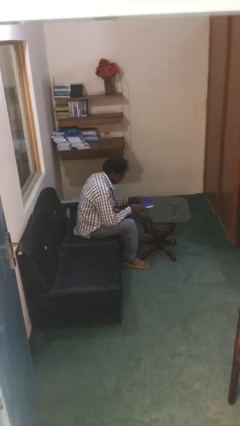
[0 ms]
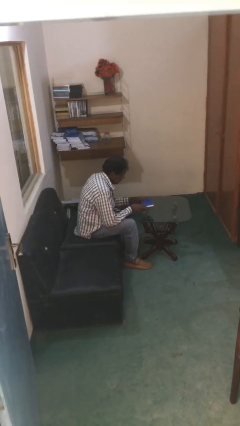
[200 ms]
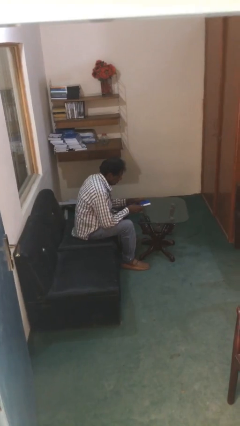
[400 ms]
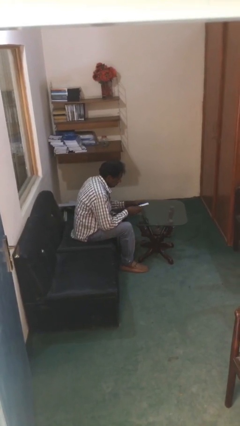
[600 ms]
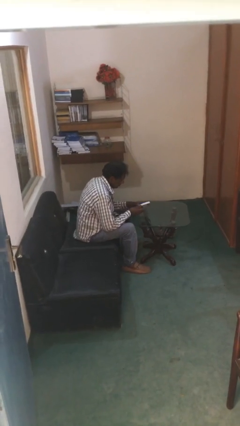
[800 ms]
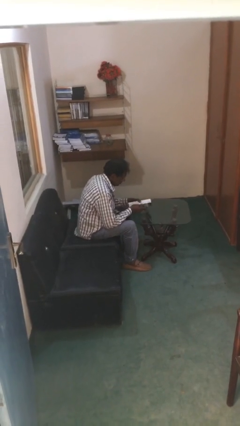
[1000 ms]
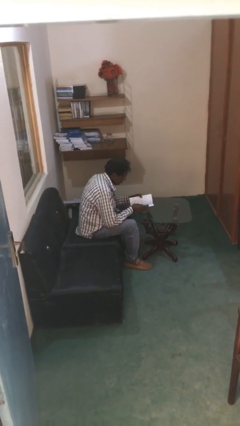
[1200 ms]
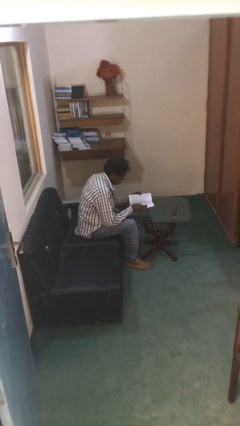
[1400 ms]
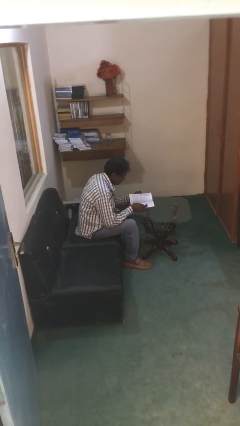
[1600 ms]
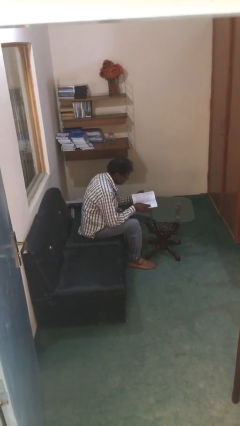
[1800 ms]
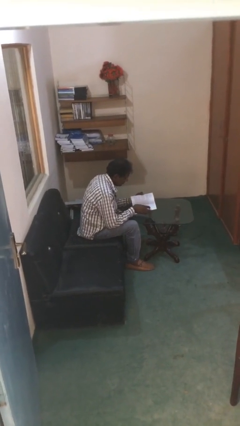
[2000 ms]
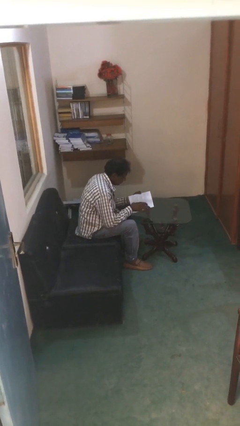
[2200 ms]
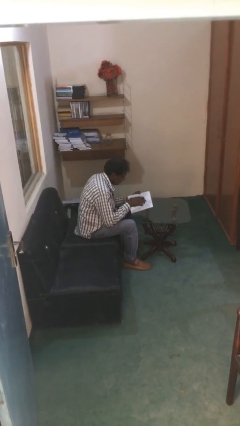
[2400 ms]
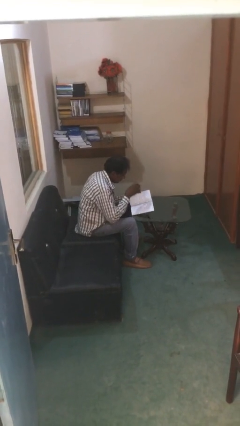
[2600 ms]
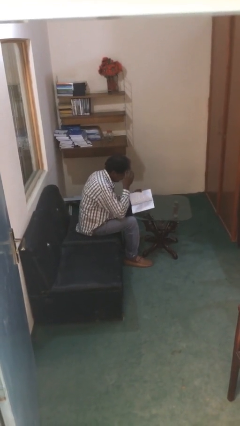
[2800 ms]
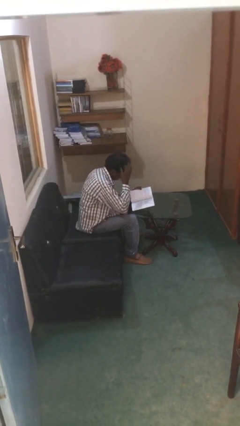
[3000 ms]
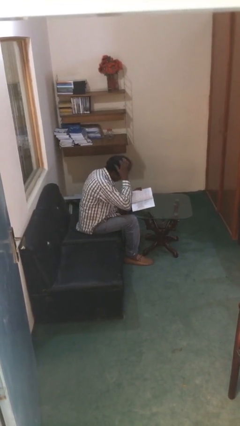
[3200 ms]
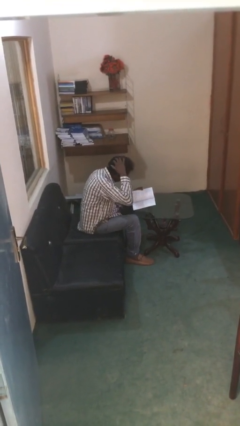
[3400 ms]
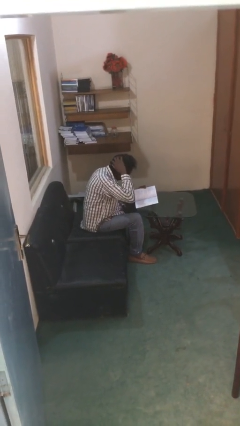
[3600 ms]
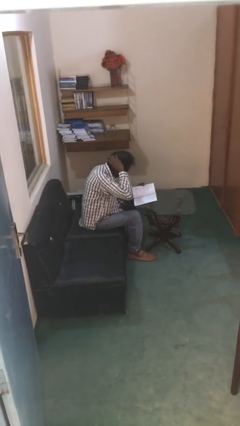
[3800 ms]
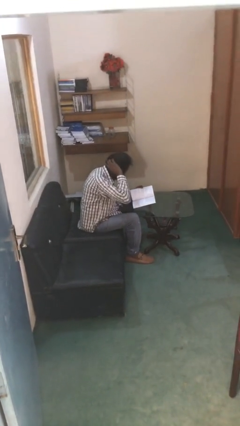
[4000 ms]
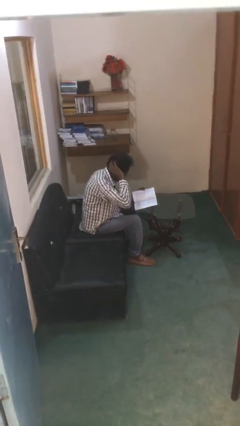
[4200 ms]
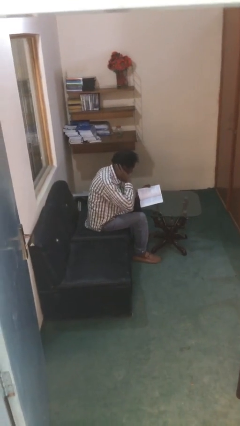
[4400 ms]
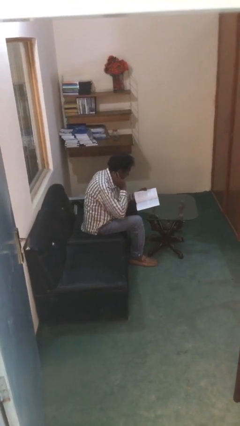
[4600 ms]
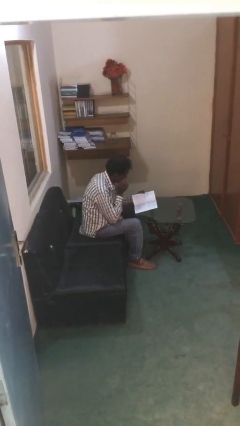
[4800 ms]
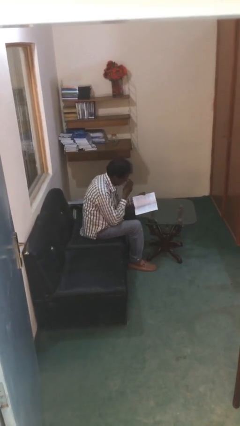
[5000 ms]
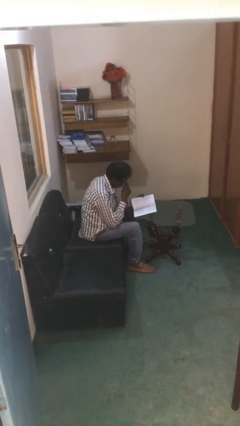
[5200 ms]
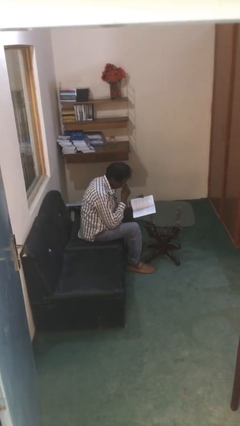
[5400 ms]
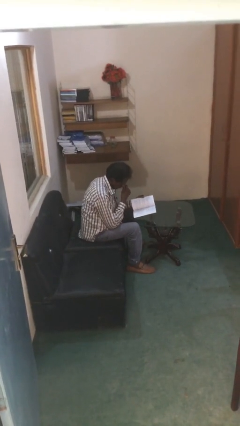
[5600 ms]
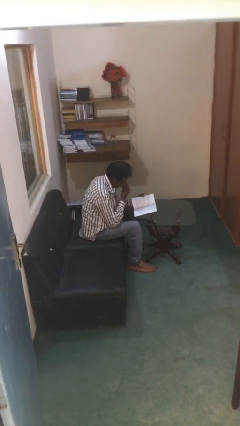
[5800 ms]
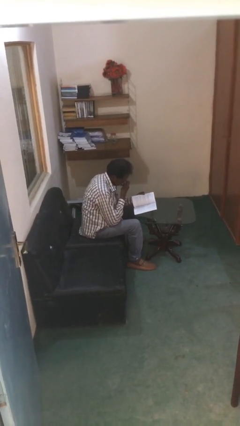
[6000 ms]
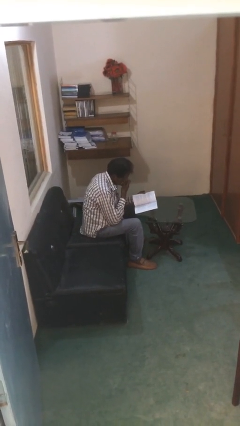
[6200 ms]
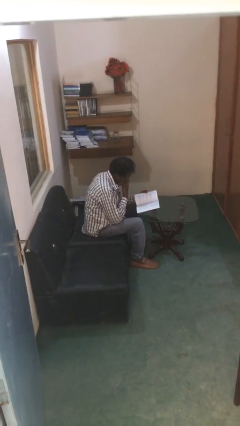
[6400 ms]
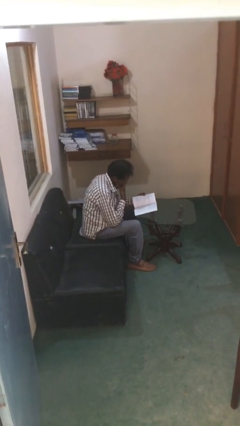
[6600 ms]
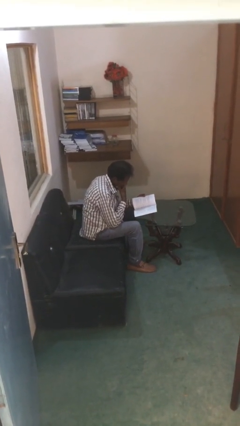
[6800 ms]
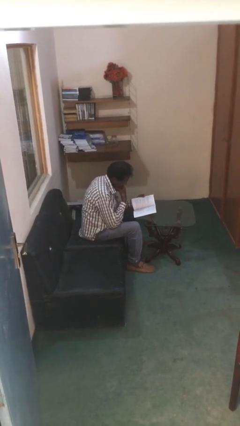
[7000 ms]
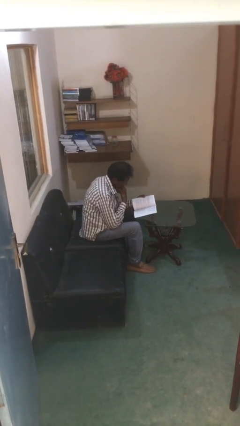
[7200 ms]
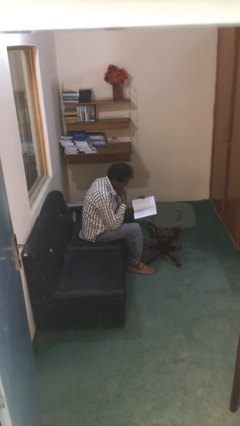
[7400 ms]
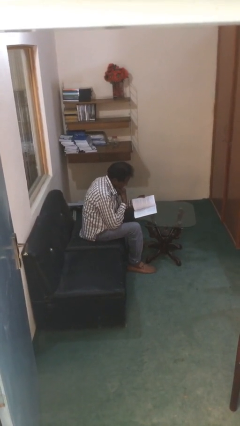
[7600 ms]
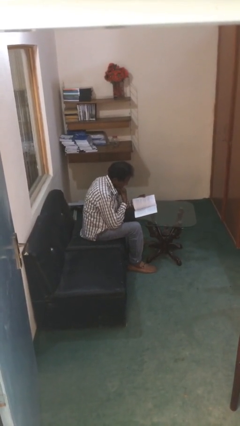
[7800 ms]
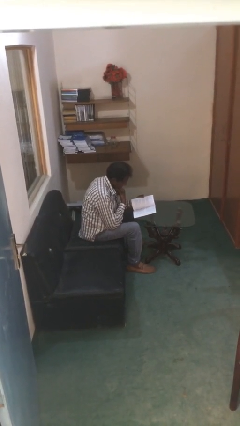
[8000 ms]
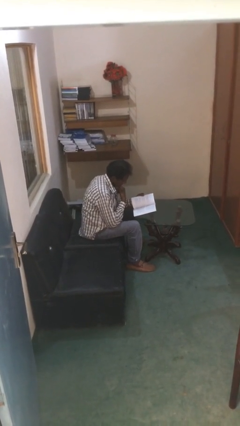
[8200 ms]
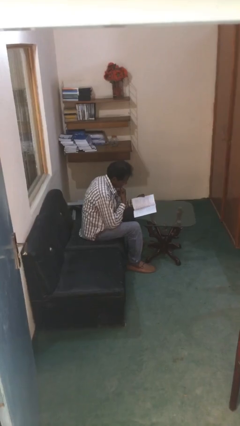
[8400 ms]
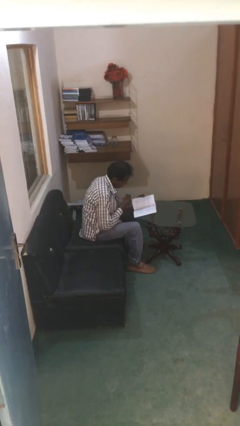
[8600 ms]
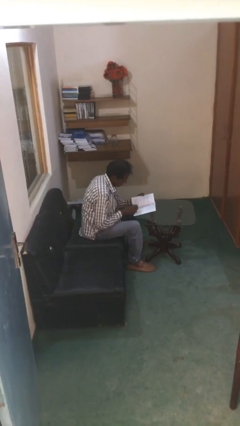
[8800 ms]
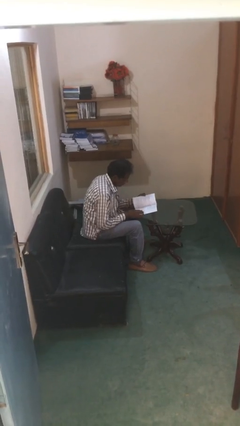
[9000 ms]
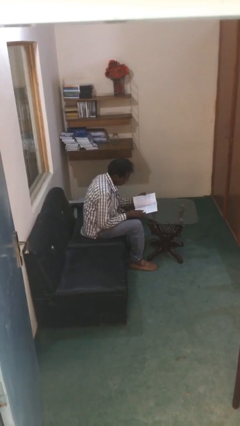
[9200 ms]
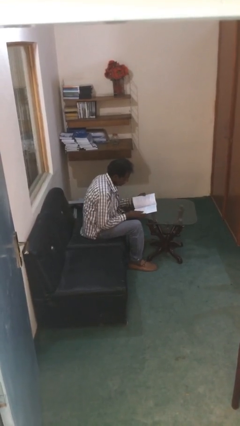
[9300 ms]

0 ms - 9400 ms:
person reads document

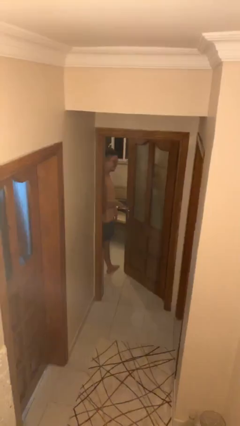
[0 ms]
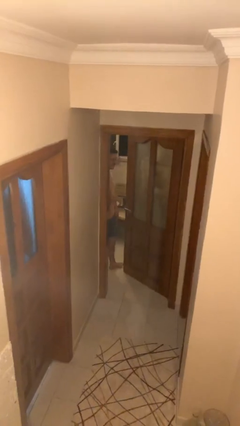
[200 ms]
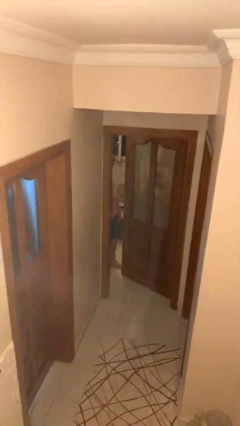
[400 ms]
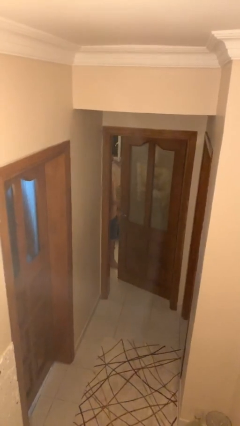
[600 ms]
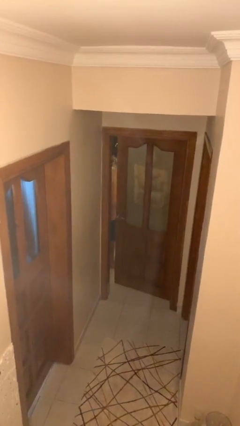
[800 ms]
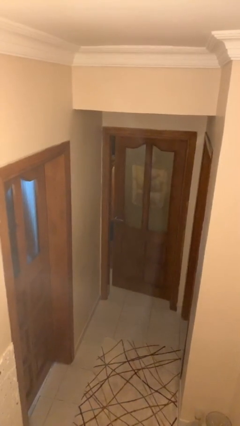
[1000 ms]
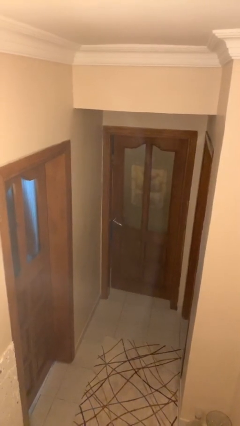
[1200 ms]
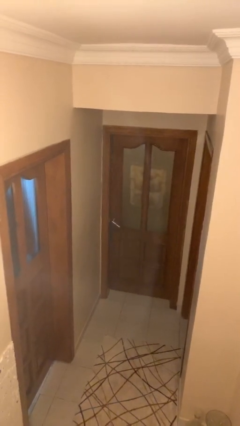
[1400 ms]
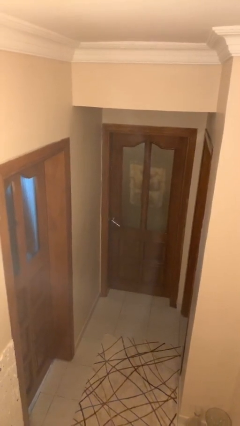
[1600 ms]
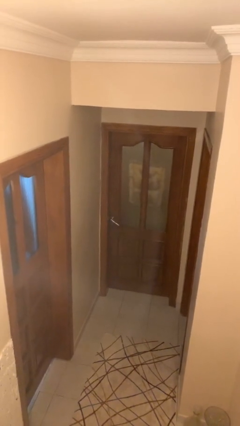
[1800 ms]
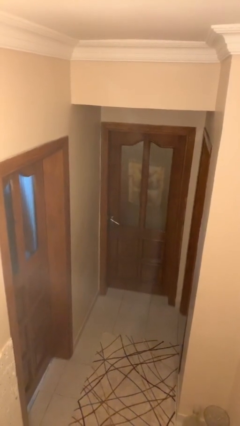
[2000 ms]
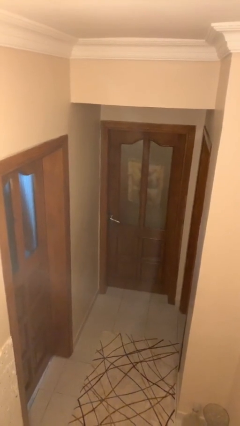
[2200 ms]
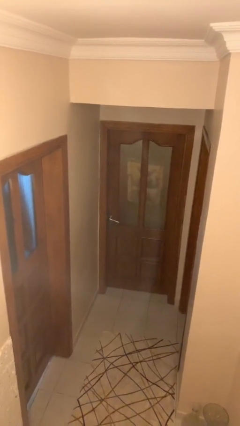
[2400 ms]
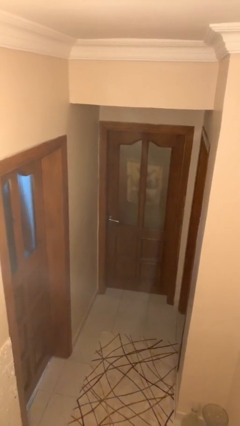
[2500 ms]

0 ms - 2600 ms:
person closes facility door

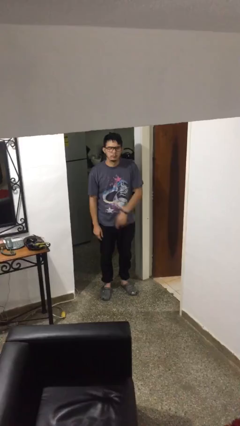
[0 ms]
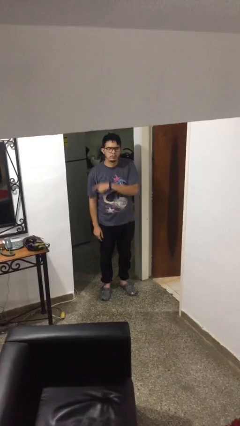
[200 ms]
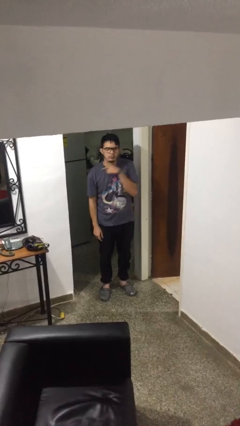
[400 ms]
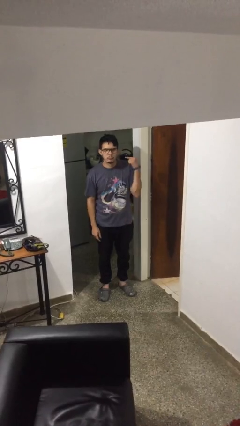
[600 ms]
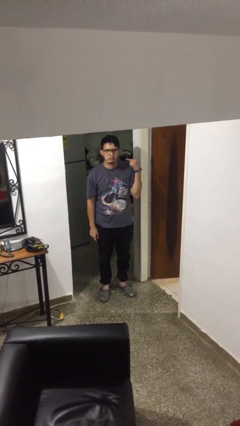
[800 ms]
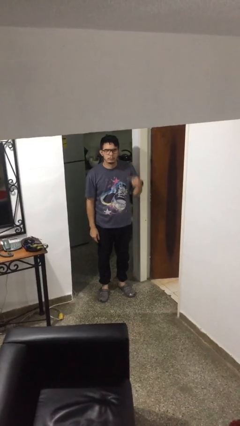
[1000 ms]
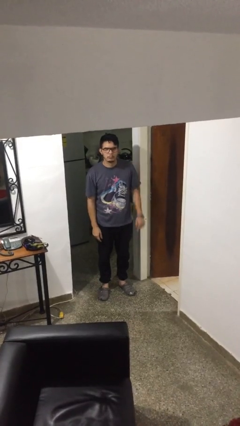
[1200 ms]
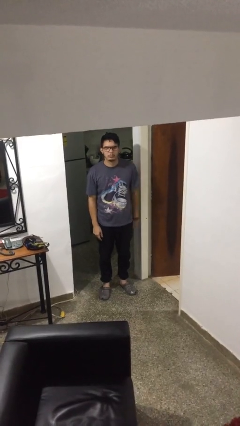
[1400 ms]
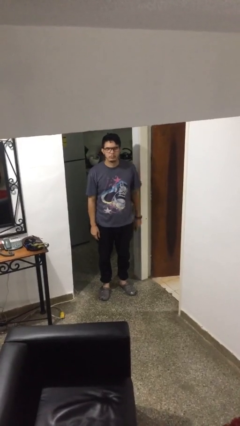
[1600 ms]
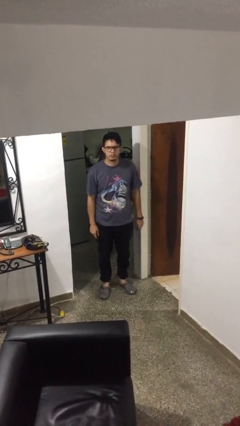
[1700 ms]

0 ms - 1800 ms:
person gestures cut

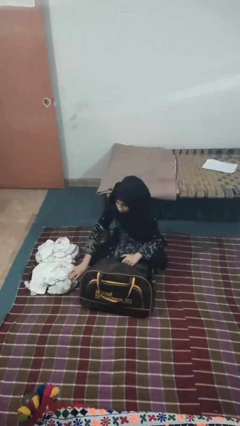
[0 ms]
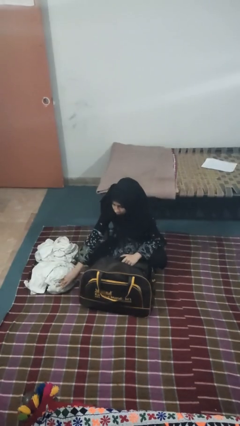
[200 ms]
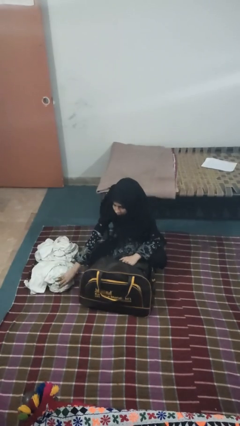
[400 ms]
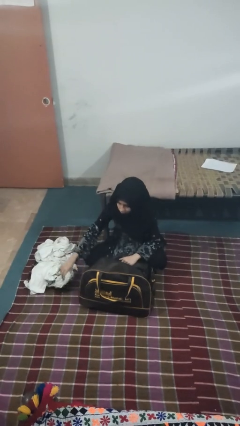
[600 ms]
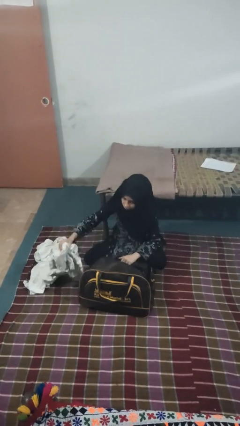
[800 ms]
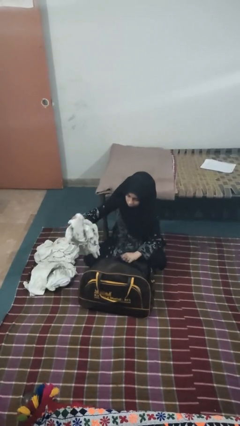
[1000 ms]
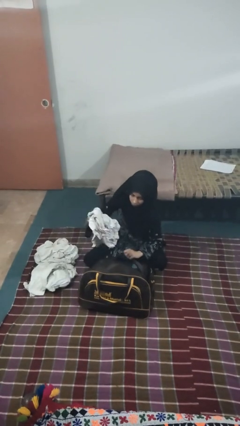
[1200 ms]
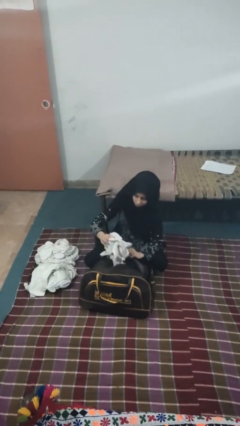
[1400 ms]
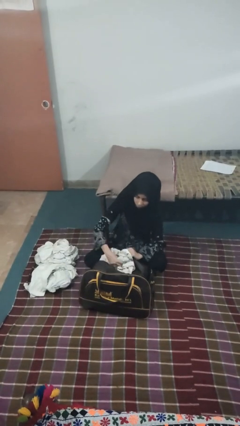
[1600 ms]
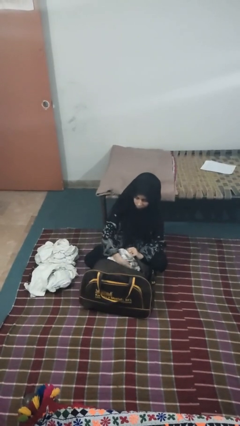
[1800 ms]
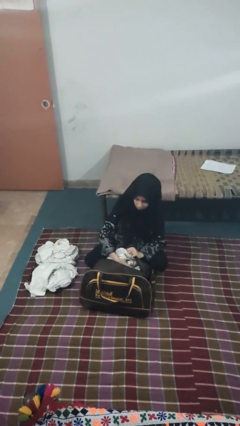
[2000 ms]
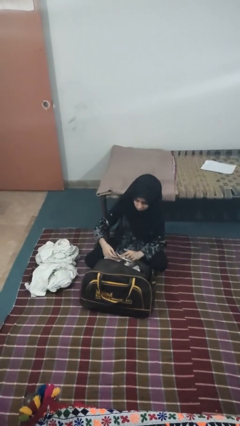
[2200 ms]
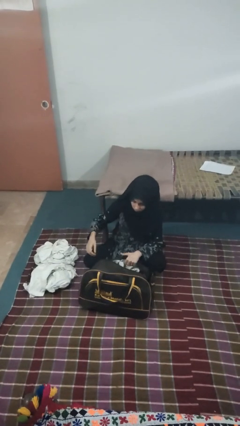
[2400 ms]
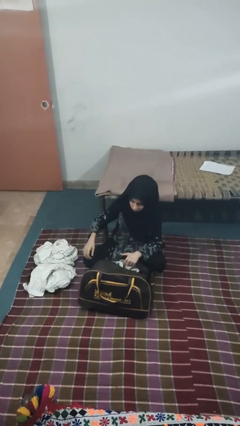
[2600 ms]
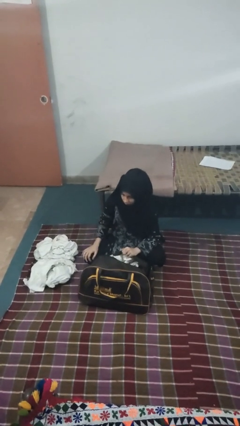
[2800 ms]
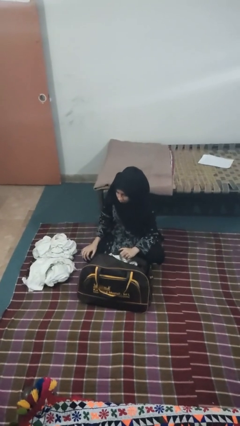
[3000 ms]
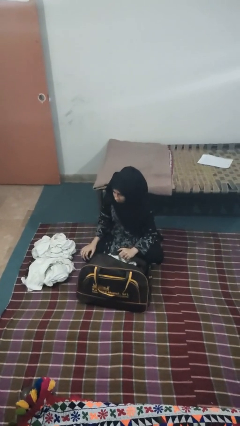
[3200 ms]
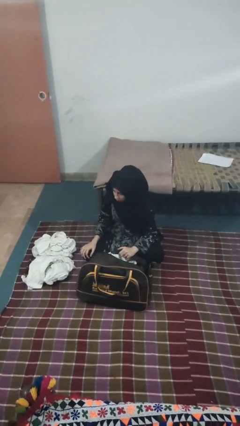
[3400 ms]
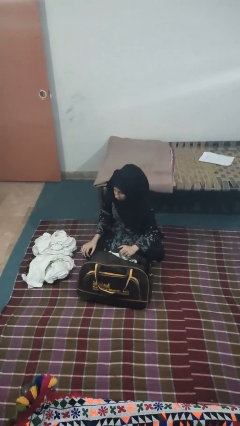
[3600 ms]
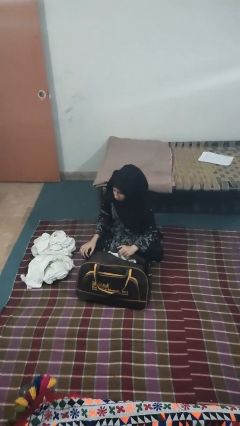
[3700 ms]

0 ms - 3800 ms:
person loads clothes into suitcase

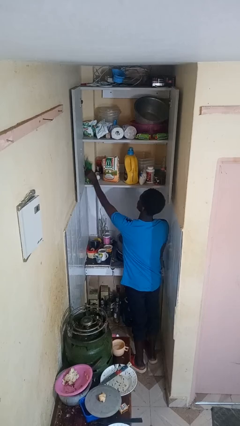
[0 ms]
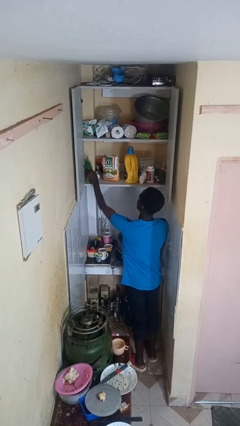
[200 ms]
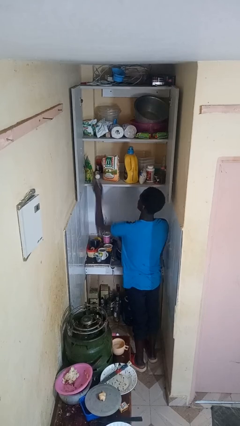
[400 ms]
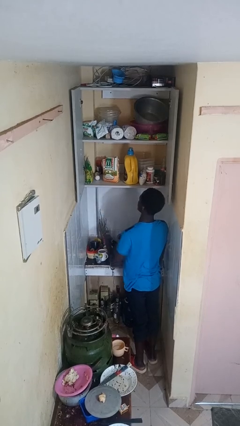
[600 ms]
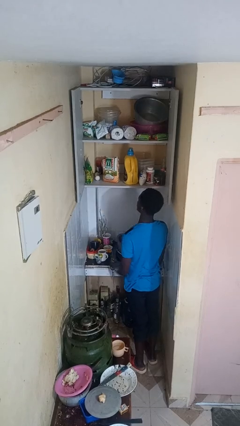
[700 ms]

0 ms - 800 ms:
person puts object in cabinet
